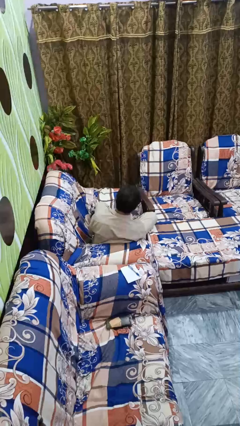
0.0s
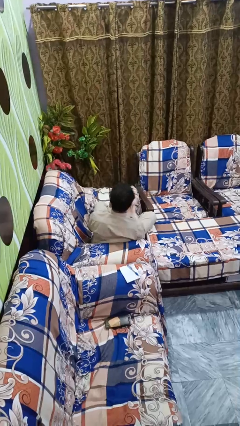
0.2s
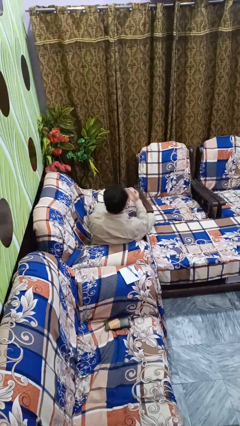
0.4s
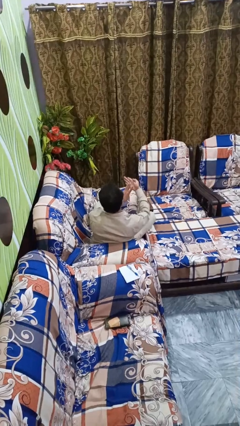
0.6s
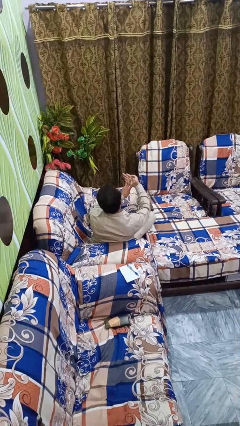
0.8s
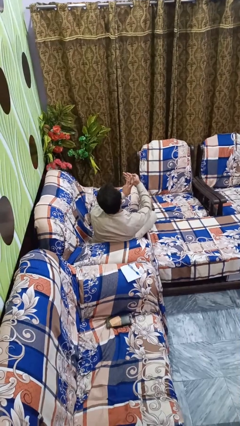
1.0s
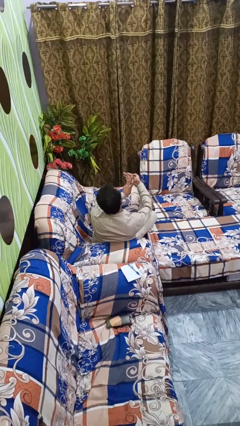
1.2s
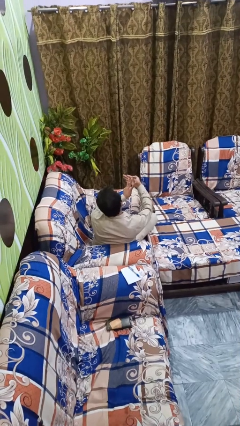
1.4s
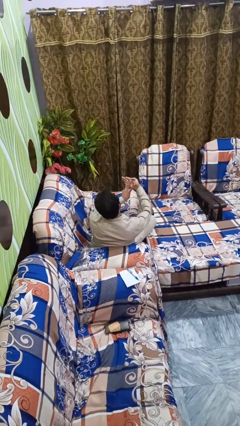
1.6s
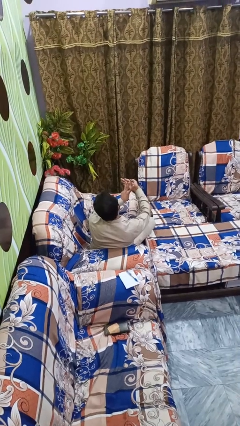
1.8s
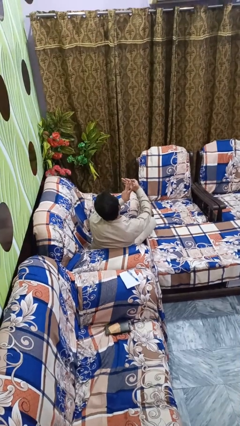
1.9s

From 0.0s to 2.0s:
person gestures number three

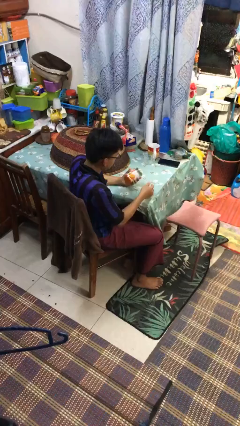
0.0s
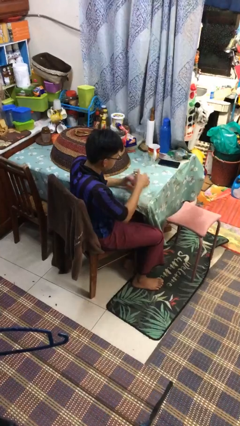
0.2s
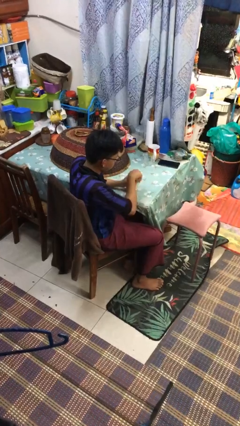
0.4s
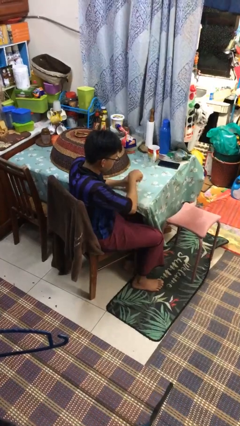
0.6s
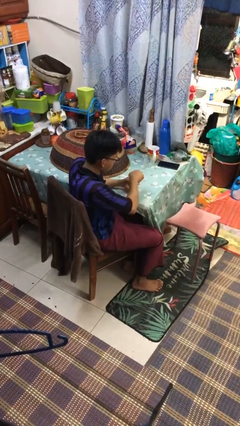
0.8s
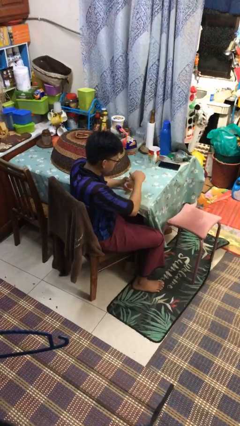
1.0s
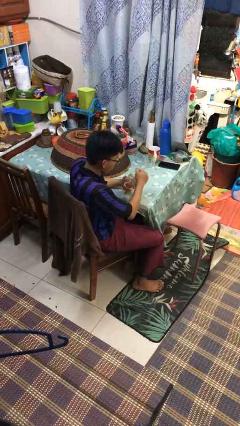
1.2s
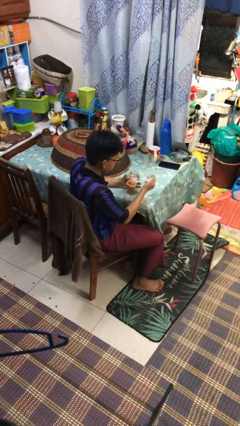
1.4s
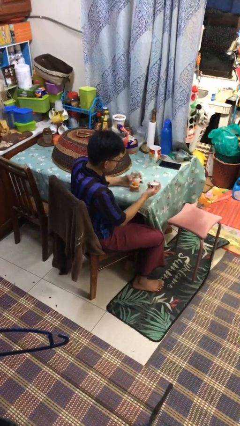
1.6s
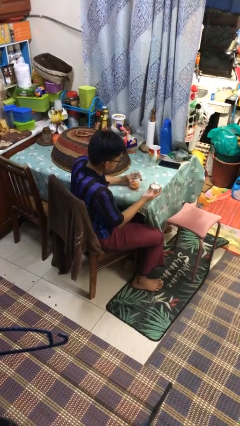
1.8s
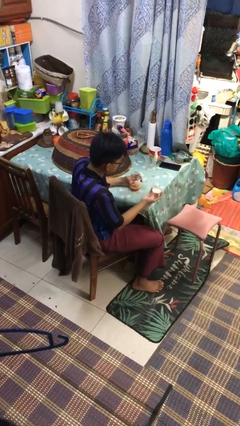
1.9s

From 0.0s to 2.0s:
person opens jar

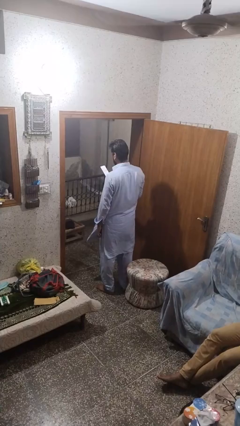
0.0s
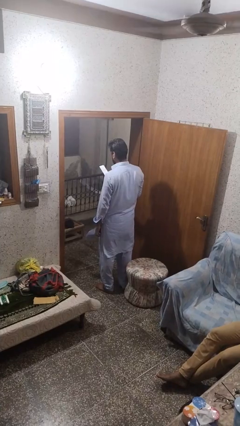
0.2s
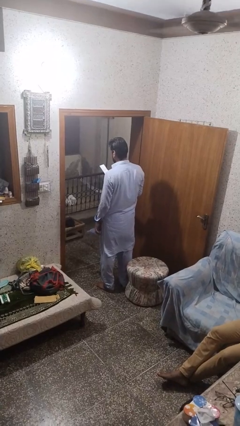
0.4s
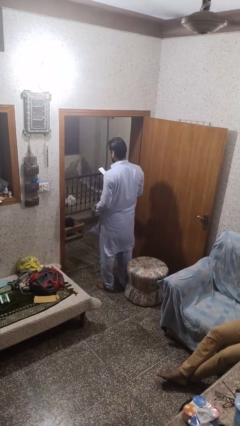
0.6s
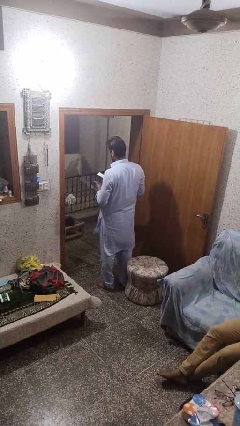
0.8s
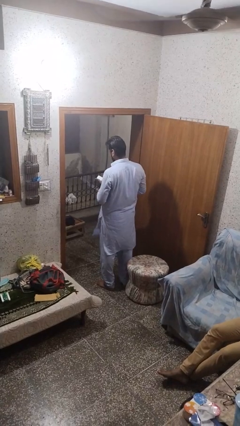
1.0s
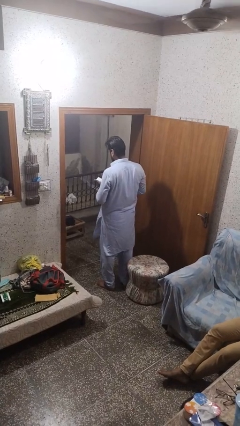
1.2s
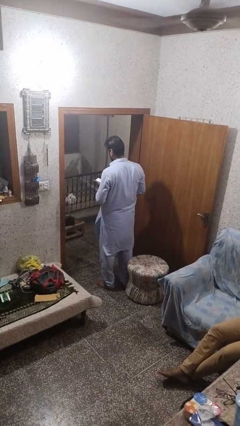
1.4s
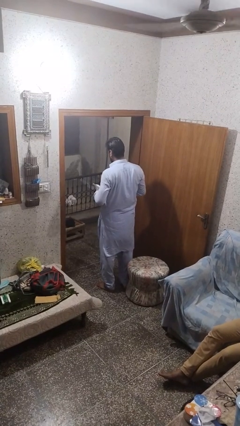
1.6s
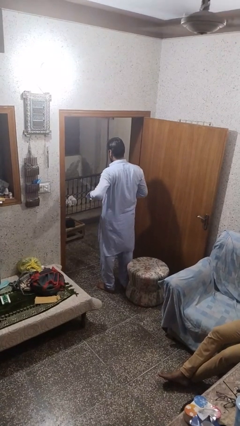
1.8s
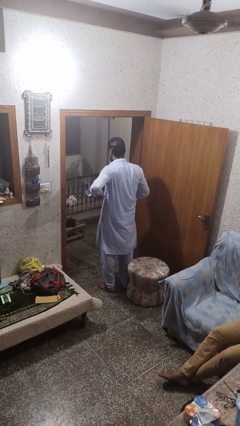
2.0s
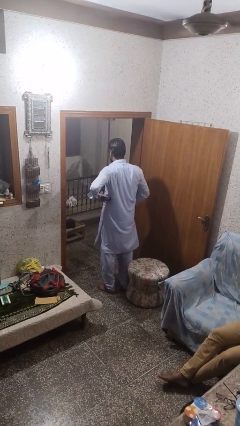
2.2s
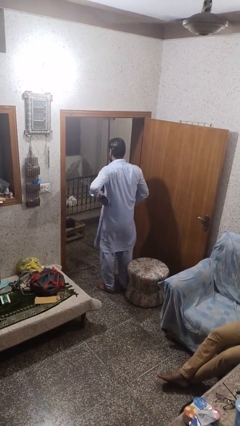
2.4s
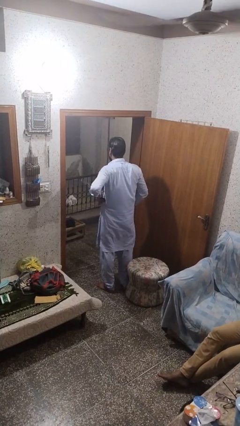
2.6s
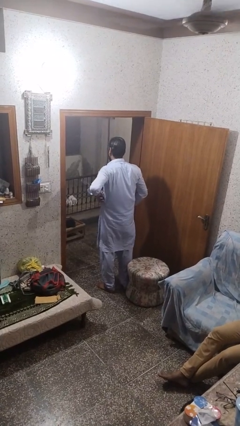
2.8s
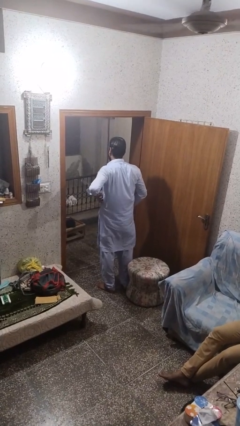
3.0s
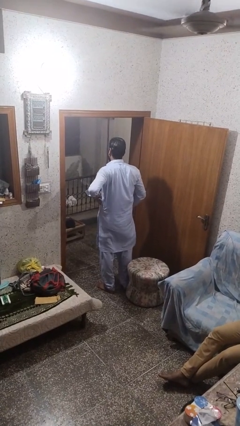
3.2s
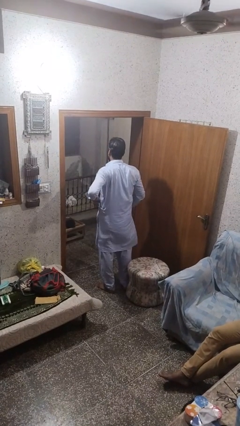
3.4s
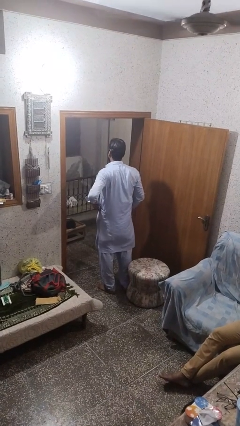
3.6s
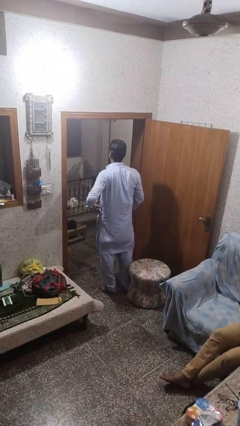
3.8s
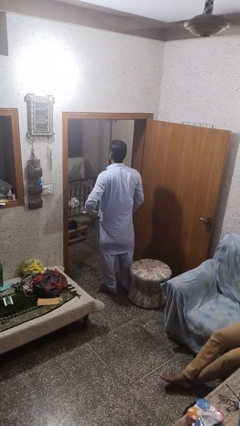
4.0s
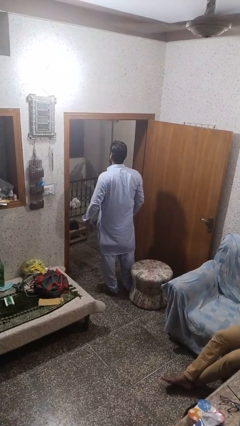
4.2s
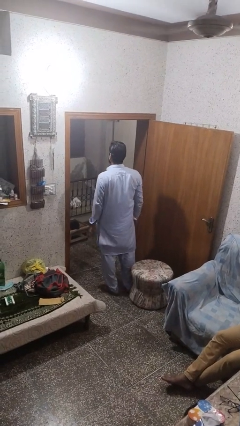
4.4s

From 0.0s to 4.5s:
person puts phone into pocket

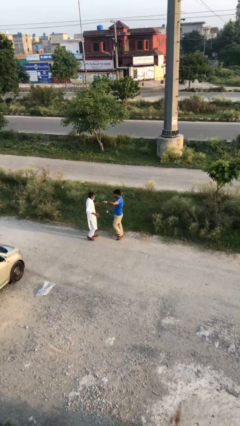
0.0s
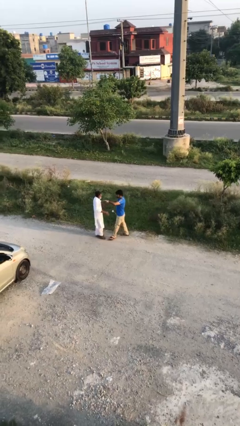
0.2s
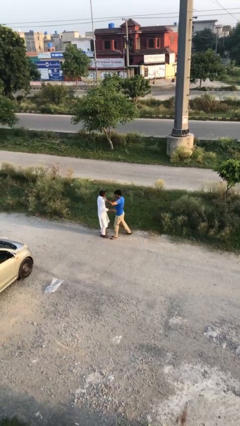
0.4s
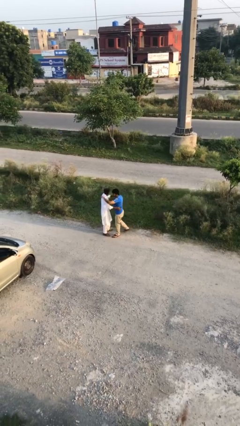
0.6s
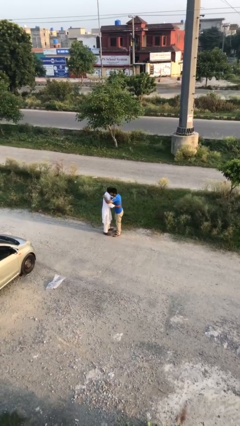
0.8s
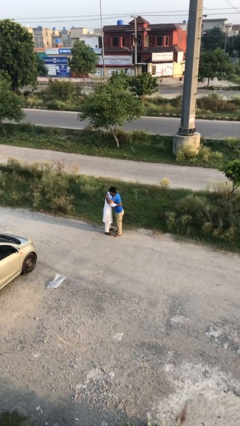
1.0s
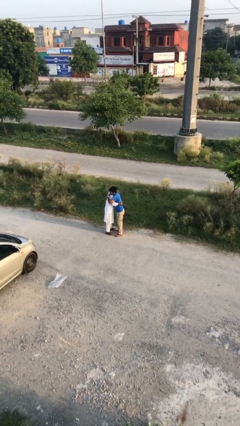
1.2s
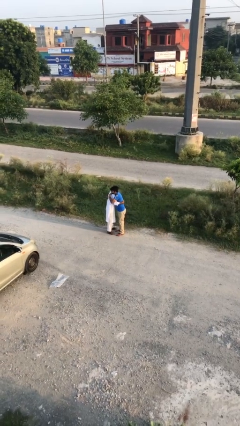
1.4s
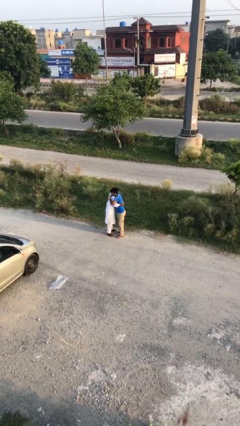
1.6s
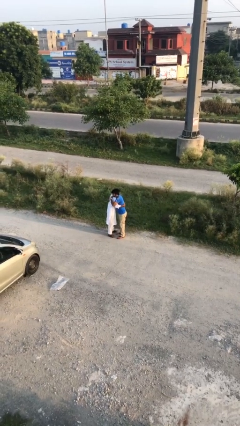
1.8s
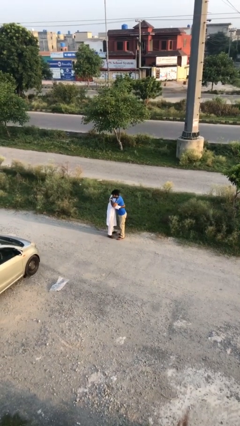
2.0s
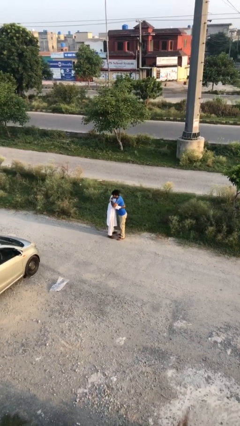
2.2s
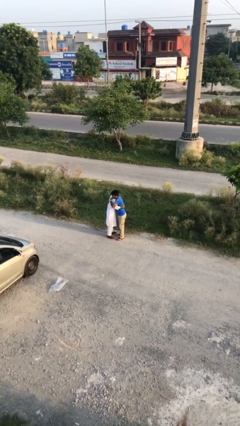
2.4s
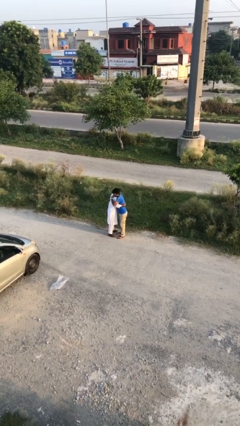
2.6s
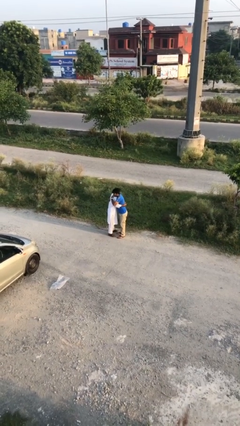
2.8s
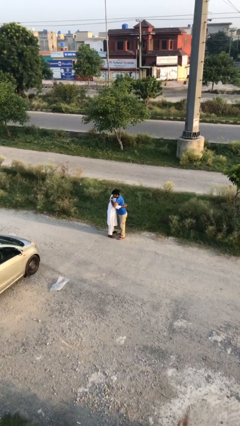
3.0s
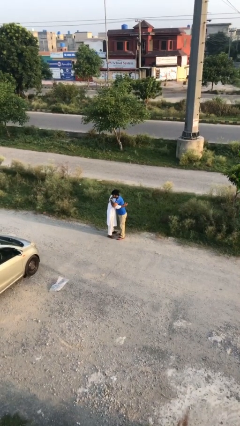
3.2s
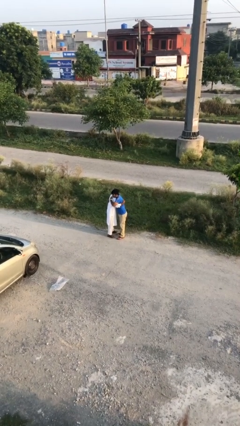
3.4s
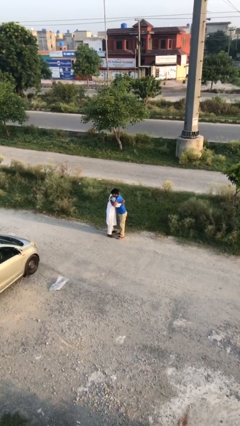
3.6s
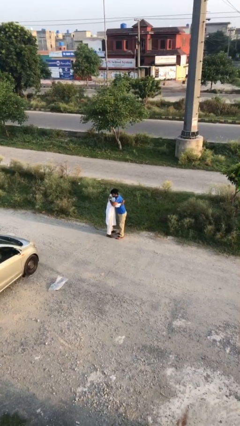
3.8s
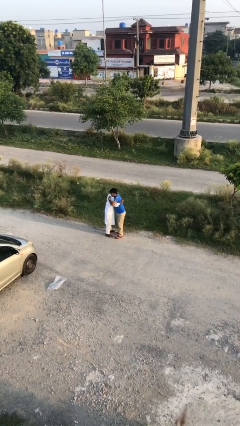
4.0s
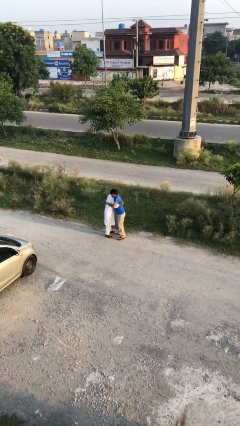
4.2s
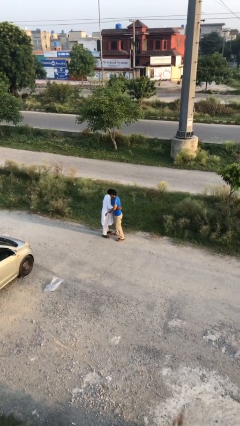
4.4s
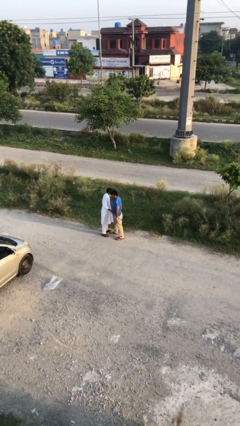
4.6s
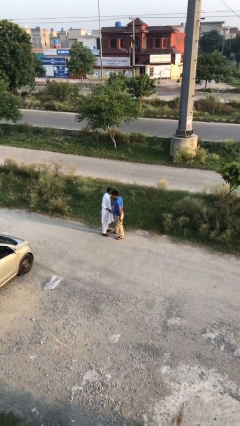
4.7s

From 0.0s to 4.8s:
person embraces person

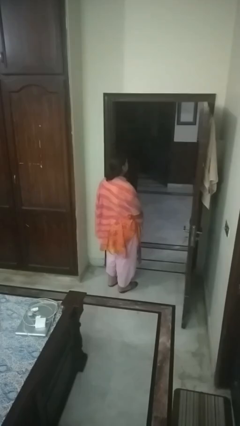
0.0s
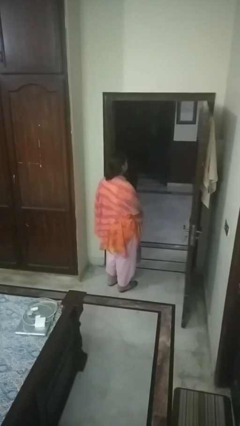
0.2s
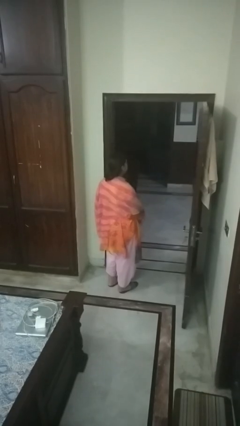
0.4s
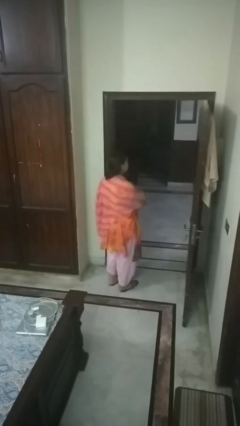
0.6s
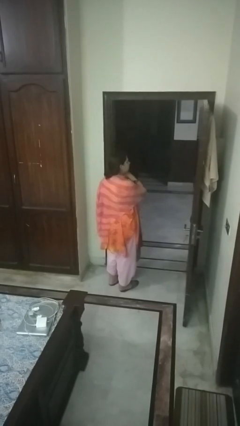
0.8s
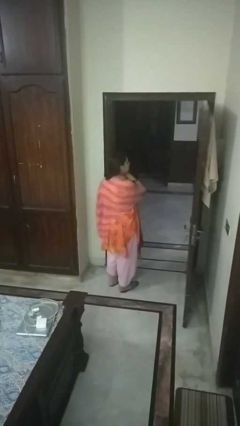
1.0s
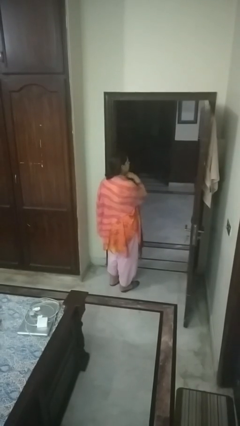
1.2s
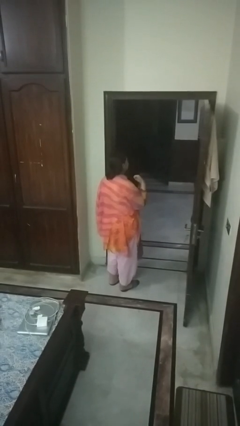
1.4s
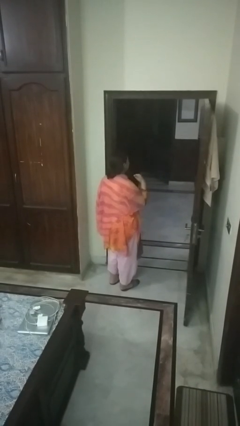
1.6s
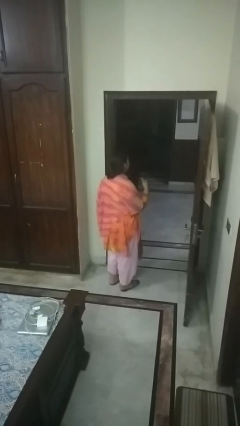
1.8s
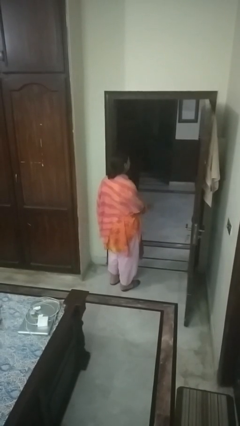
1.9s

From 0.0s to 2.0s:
person gestures cut

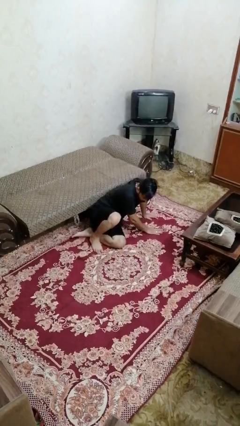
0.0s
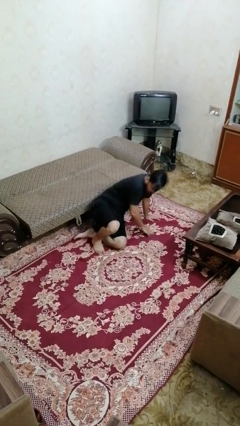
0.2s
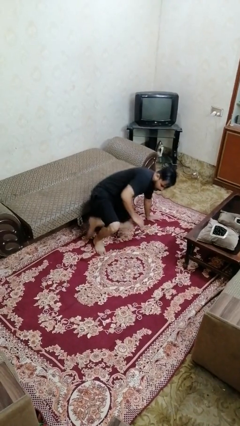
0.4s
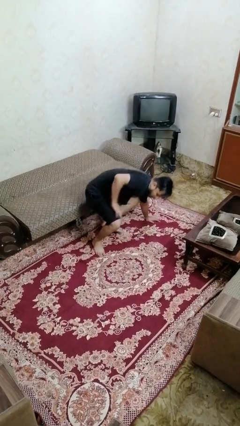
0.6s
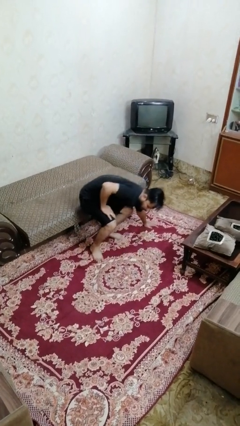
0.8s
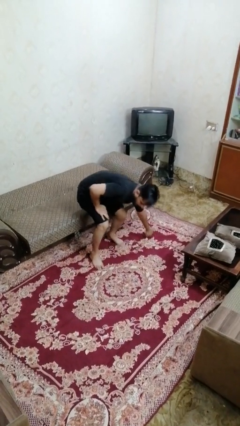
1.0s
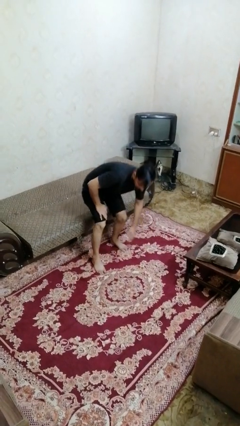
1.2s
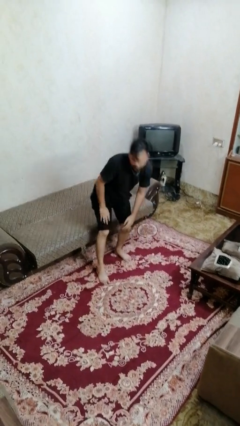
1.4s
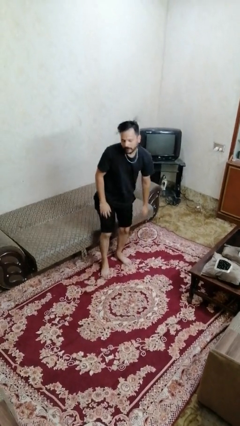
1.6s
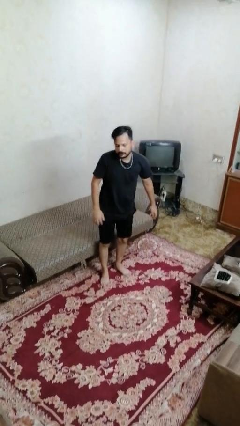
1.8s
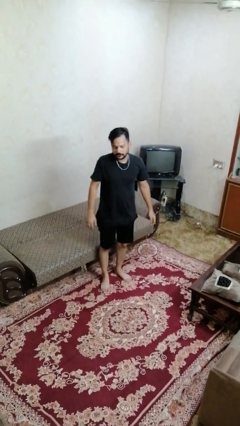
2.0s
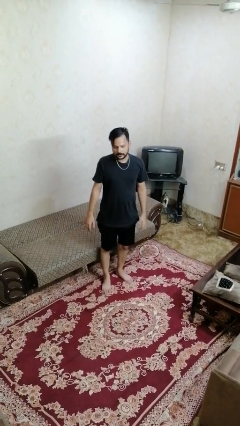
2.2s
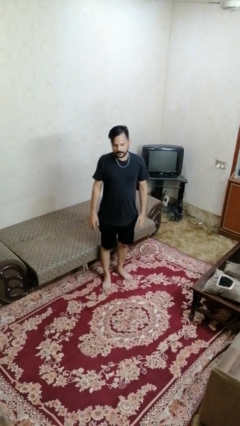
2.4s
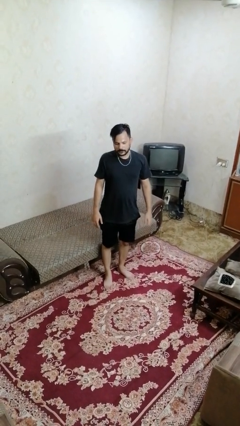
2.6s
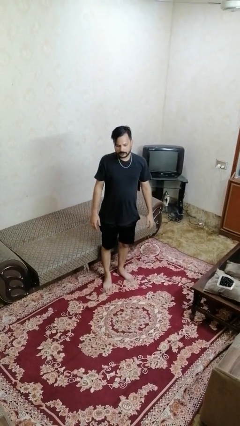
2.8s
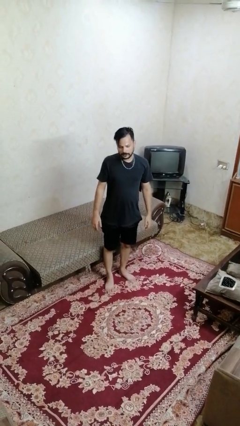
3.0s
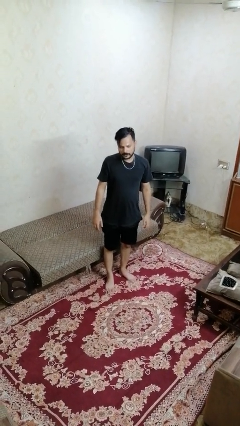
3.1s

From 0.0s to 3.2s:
person stands up from floor
